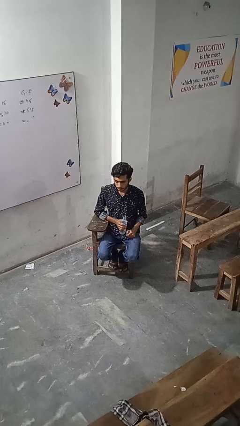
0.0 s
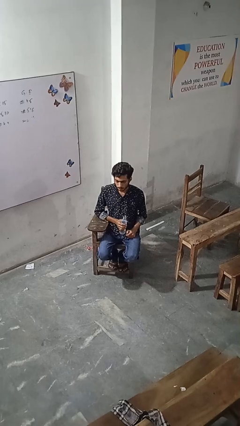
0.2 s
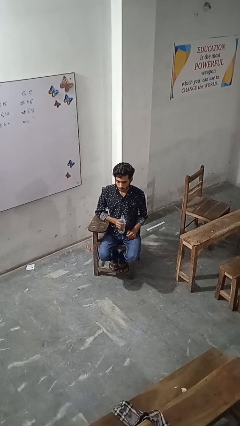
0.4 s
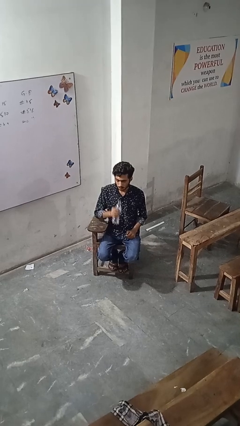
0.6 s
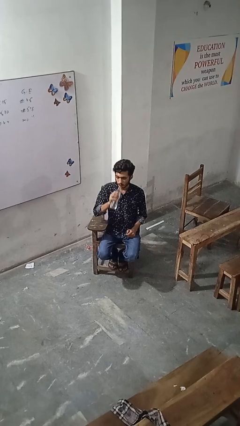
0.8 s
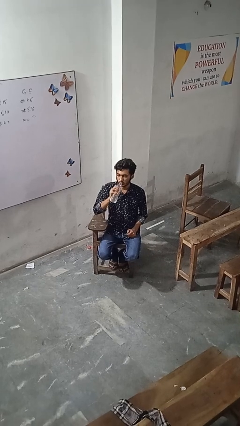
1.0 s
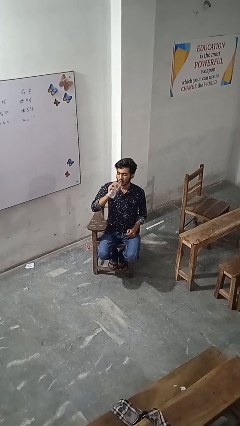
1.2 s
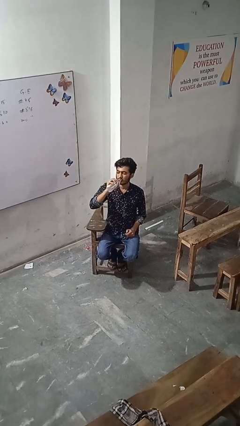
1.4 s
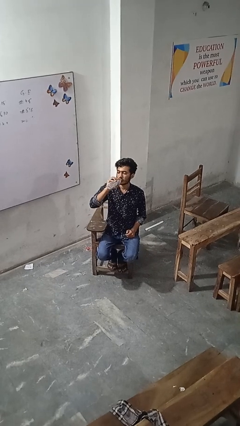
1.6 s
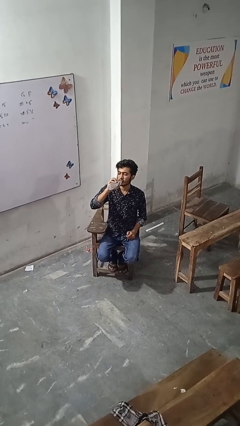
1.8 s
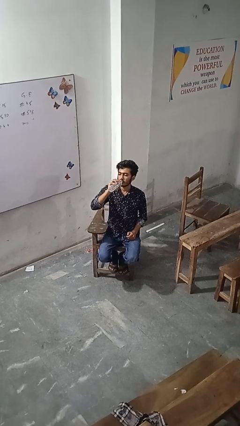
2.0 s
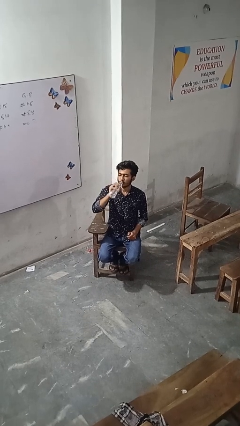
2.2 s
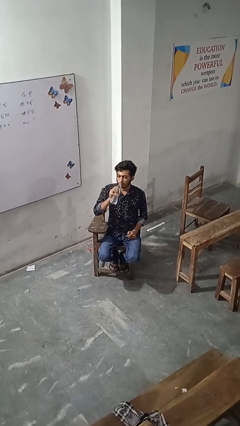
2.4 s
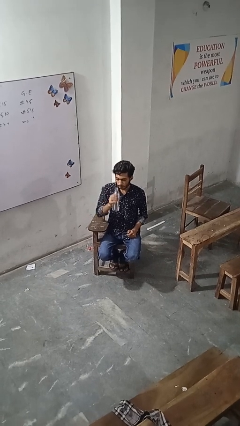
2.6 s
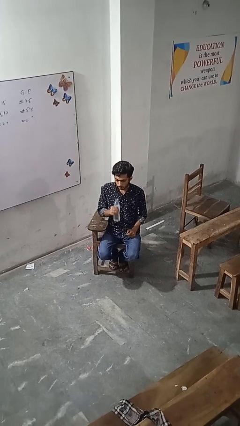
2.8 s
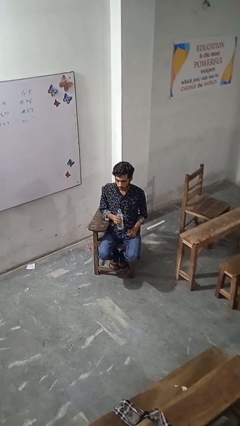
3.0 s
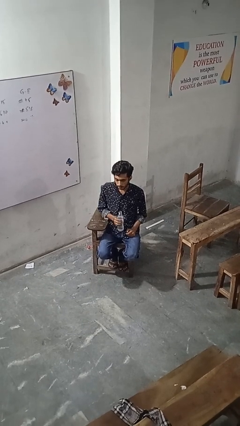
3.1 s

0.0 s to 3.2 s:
person drinks from bottle

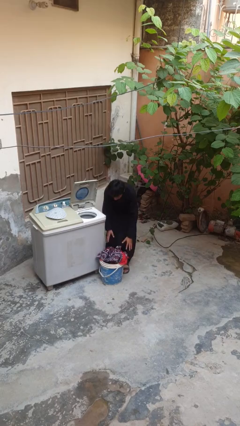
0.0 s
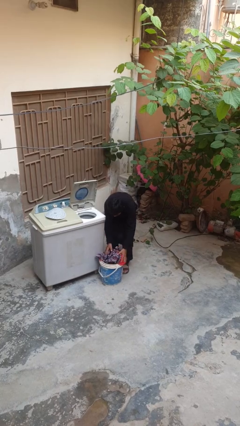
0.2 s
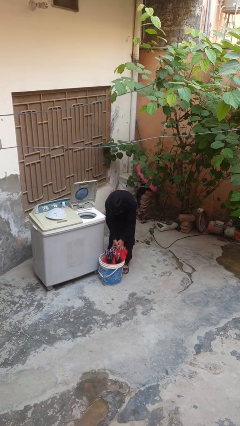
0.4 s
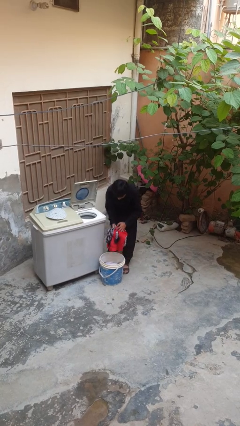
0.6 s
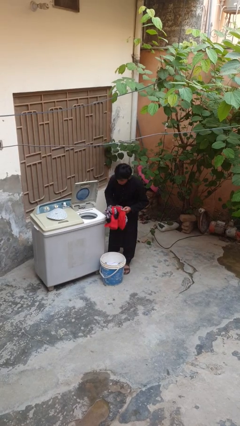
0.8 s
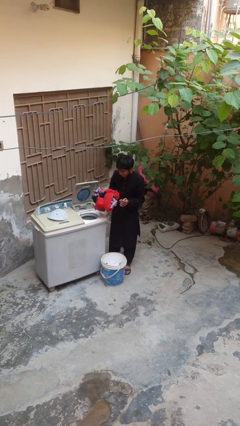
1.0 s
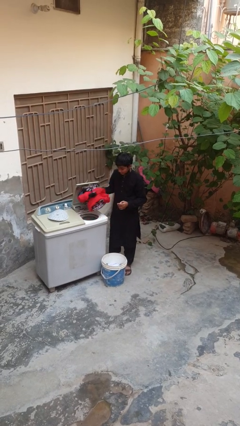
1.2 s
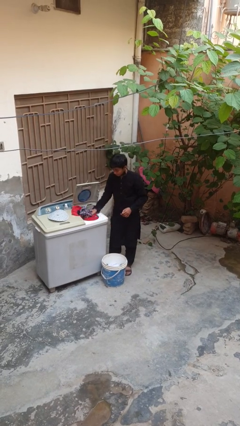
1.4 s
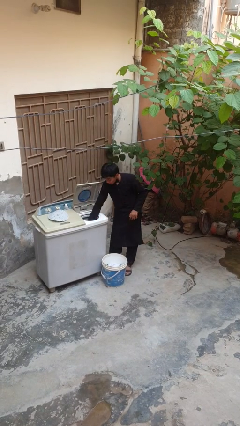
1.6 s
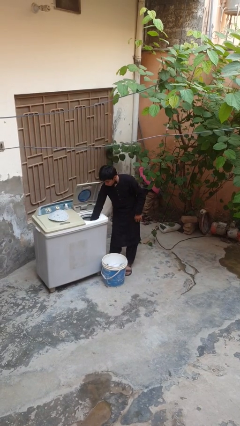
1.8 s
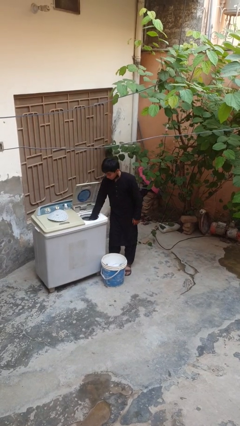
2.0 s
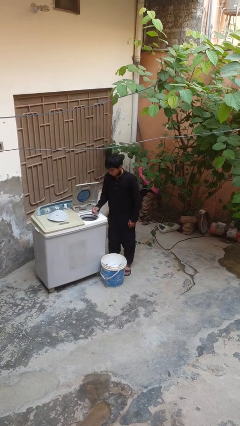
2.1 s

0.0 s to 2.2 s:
person loads dryer

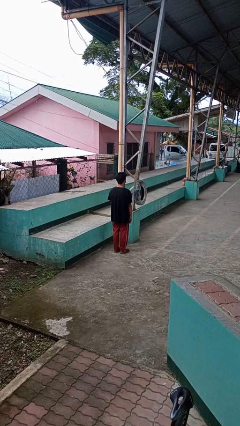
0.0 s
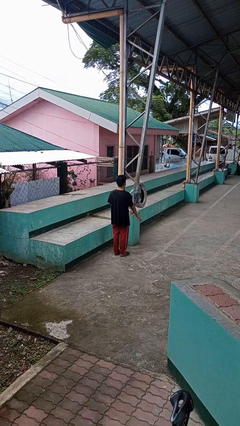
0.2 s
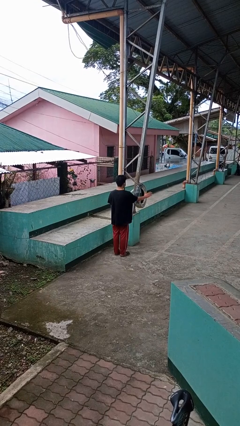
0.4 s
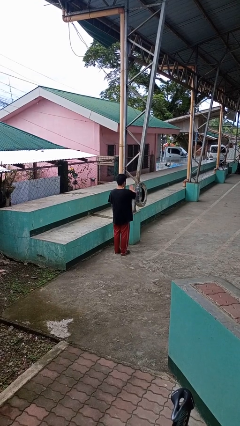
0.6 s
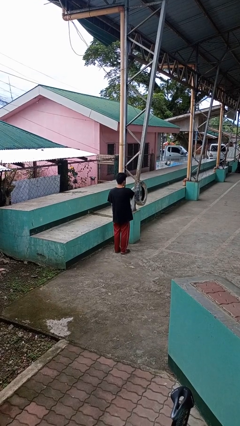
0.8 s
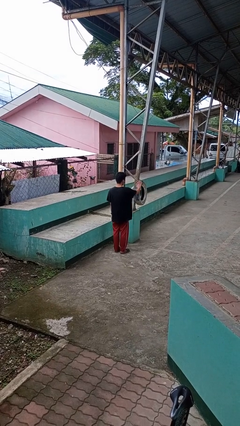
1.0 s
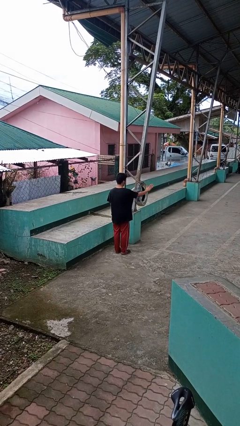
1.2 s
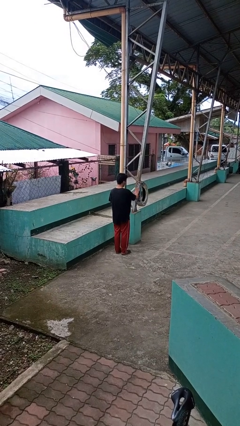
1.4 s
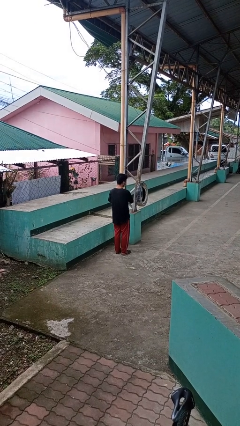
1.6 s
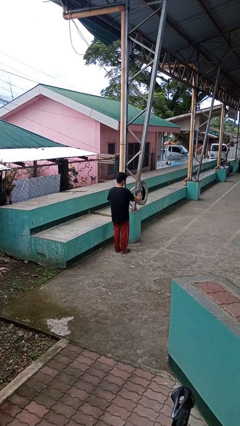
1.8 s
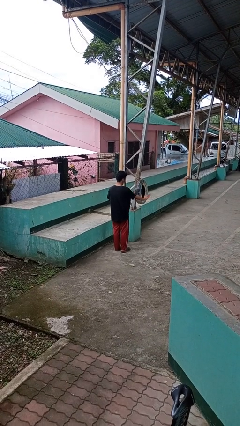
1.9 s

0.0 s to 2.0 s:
person waves hand over object

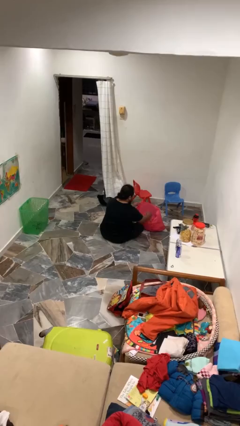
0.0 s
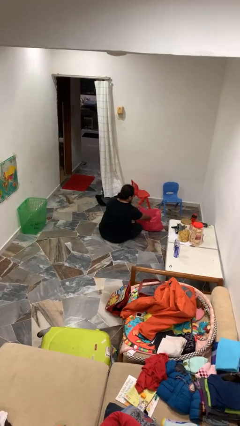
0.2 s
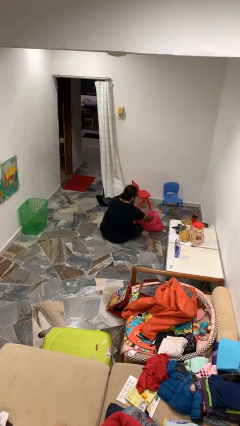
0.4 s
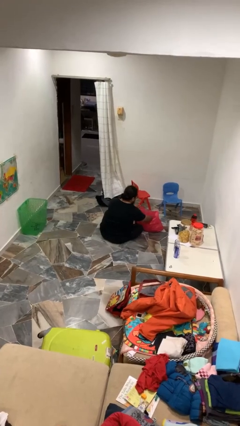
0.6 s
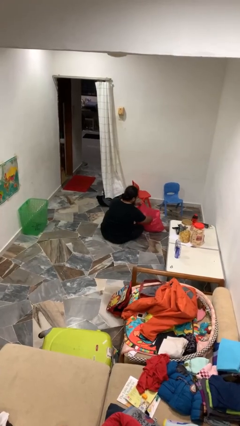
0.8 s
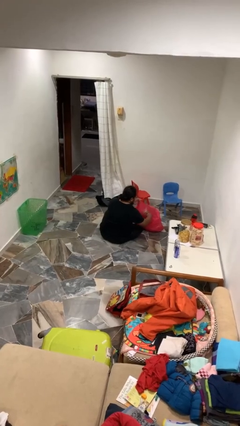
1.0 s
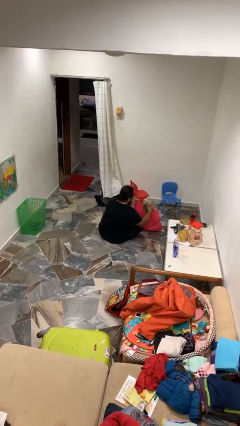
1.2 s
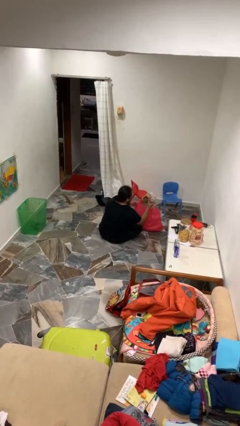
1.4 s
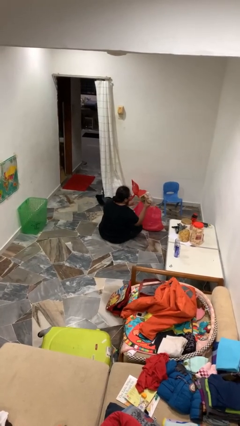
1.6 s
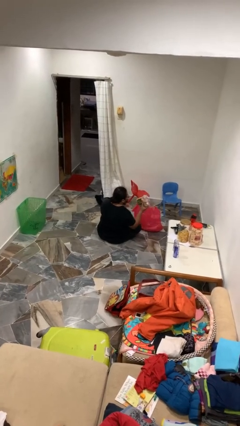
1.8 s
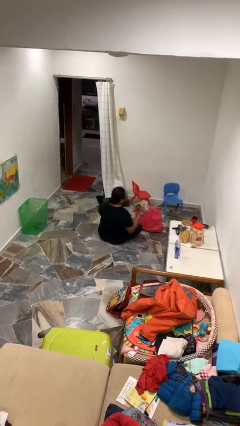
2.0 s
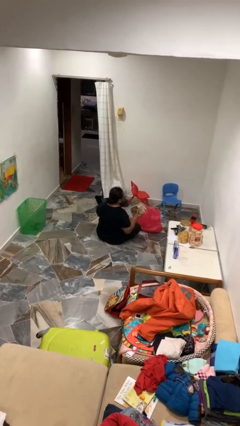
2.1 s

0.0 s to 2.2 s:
person takes object from bag

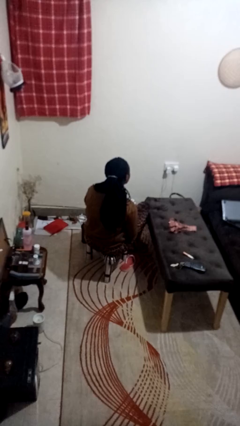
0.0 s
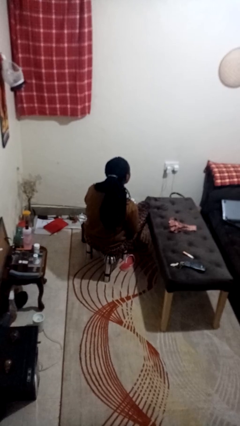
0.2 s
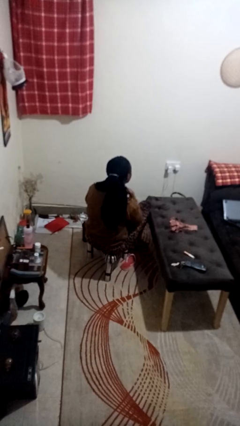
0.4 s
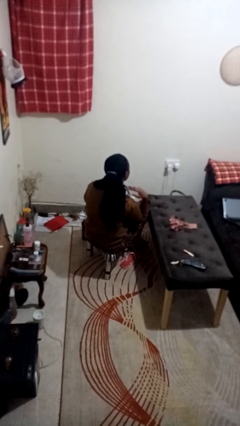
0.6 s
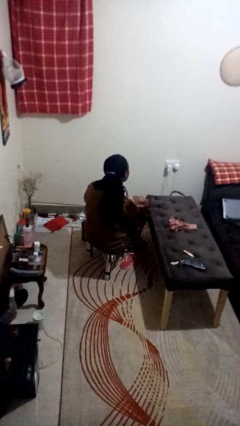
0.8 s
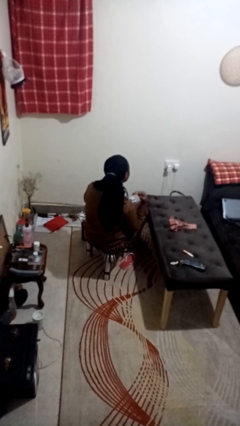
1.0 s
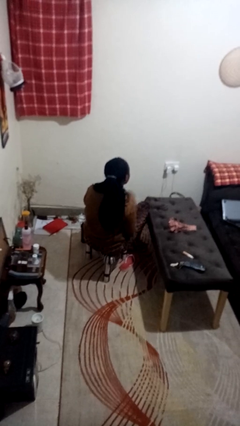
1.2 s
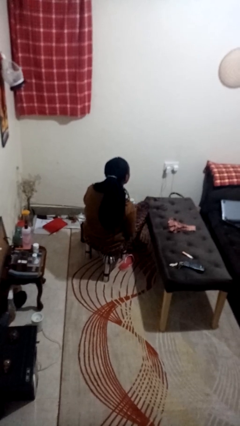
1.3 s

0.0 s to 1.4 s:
person gestures cut

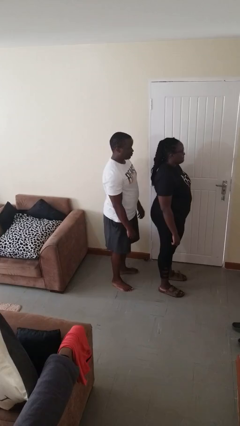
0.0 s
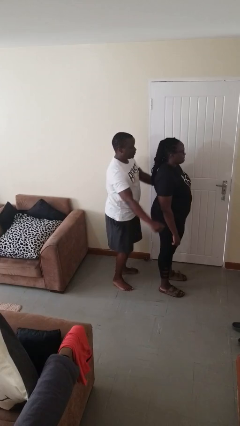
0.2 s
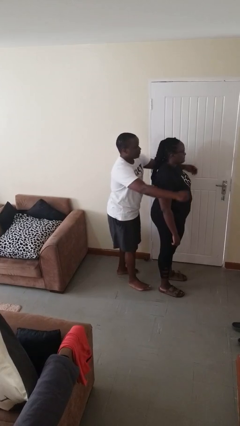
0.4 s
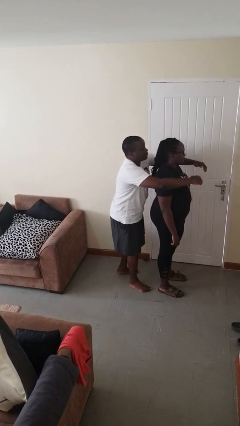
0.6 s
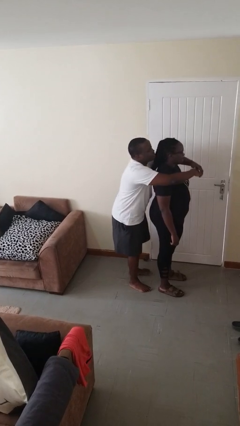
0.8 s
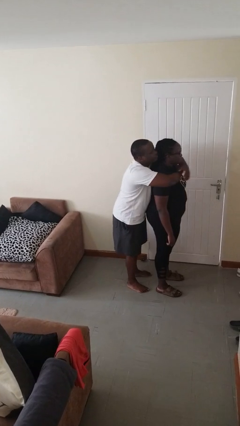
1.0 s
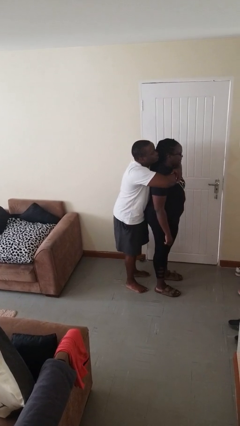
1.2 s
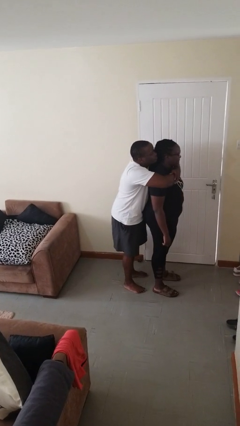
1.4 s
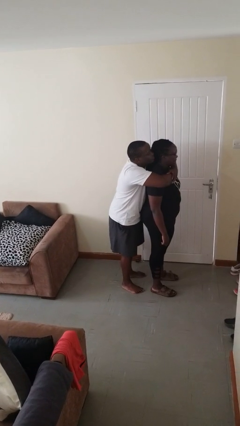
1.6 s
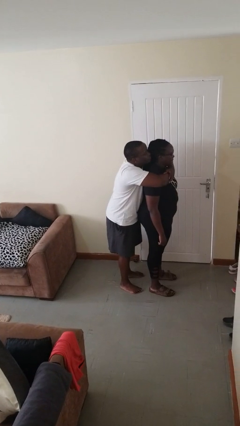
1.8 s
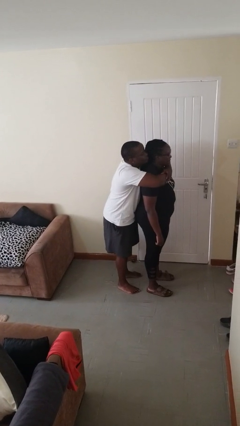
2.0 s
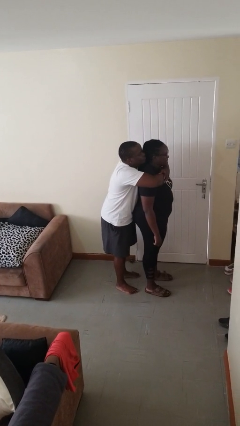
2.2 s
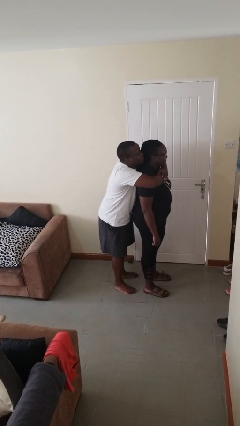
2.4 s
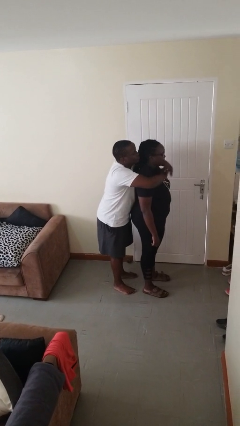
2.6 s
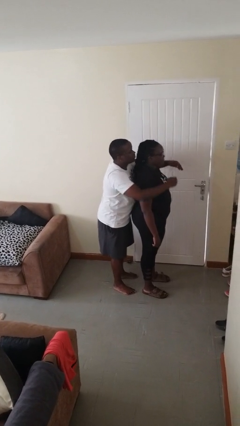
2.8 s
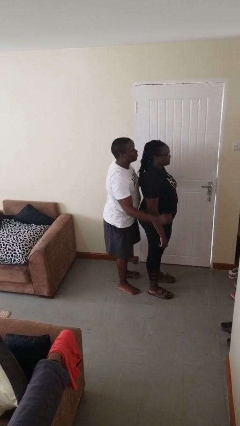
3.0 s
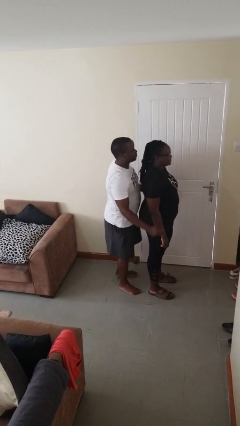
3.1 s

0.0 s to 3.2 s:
person hugs person from behind

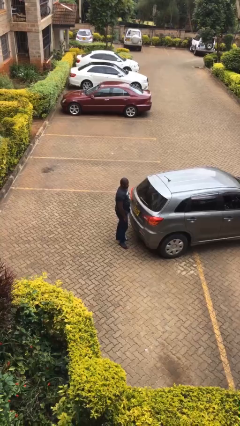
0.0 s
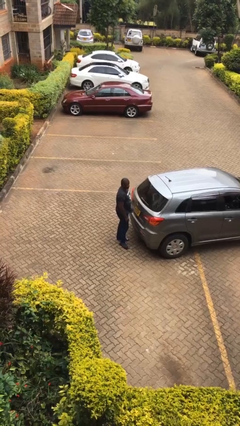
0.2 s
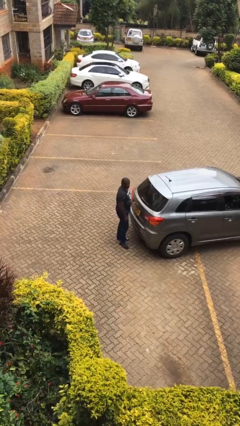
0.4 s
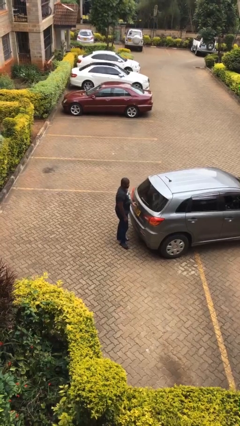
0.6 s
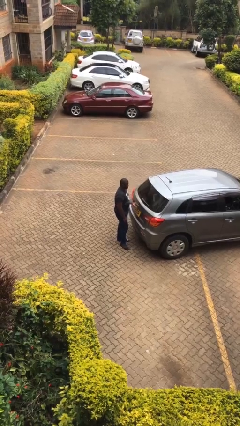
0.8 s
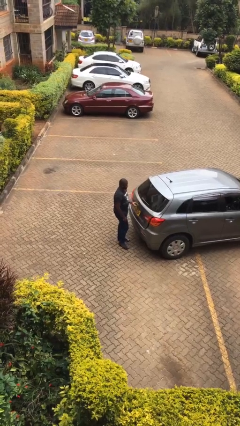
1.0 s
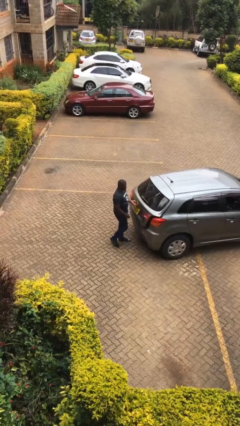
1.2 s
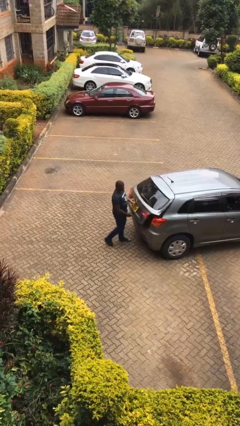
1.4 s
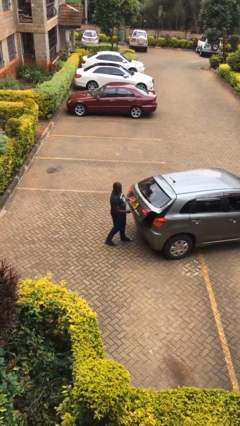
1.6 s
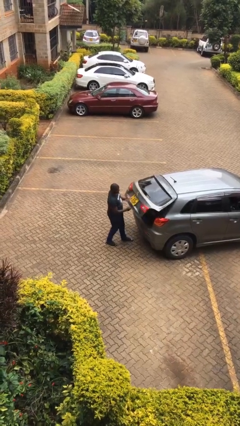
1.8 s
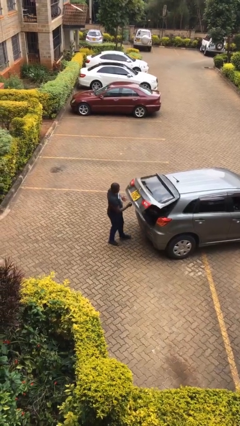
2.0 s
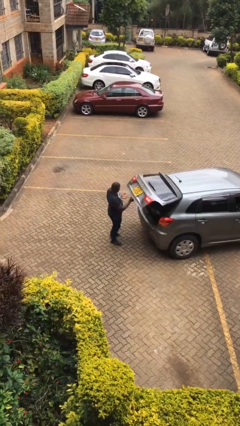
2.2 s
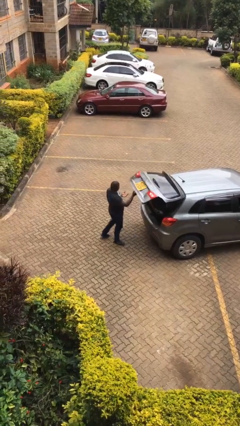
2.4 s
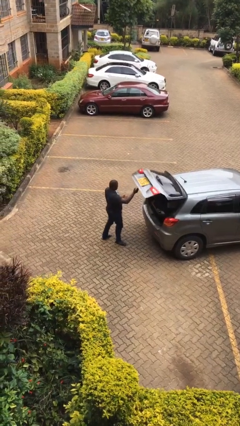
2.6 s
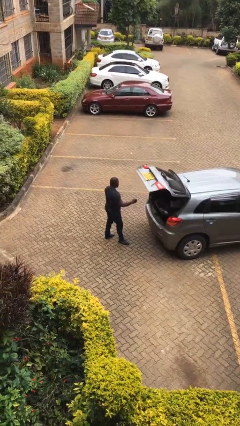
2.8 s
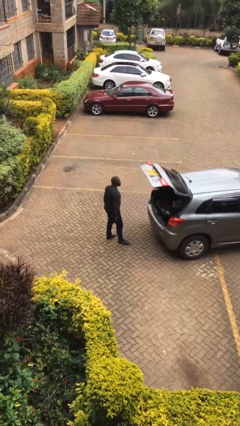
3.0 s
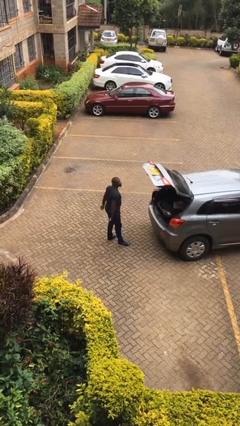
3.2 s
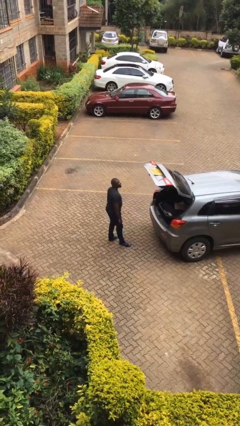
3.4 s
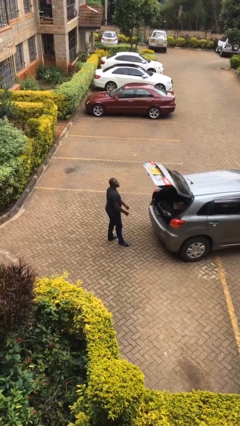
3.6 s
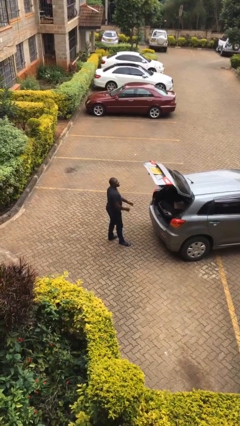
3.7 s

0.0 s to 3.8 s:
person opens car trunk
